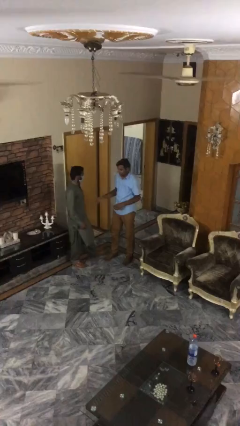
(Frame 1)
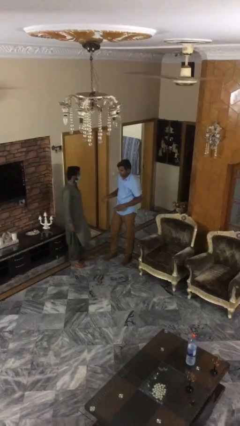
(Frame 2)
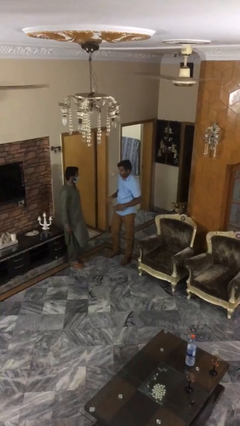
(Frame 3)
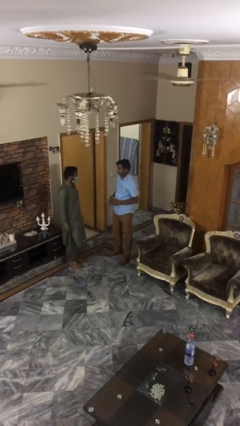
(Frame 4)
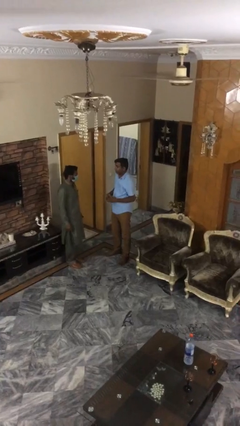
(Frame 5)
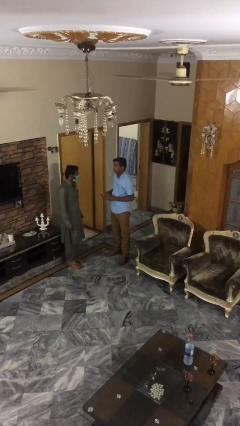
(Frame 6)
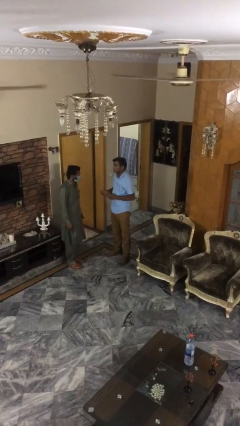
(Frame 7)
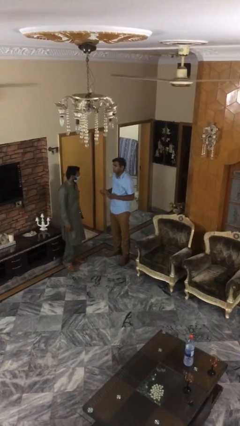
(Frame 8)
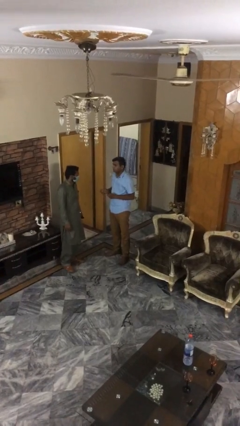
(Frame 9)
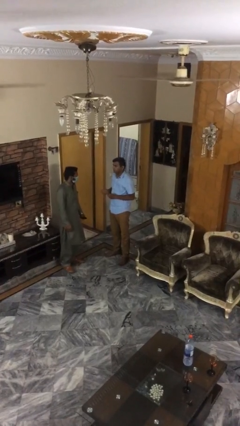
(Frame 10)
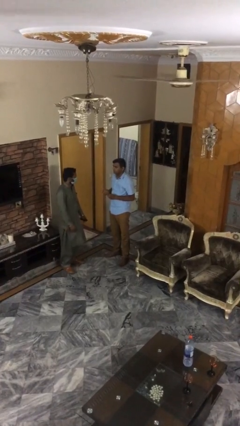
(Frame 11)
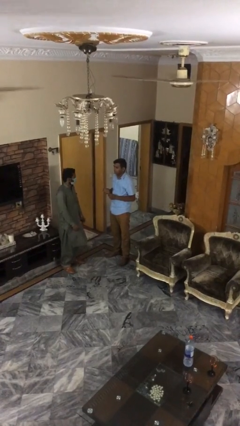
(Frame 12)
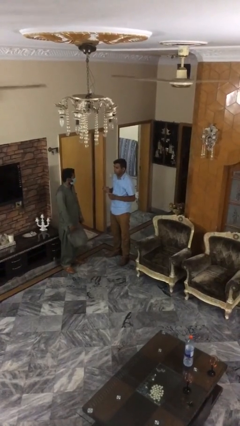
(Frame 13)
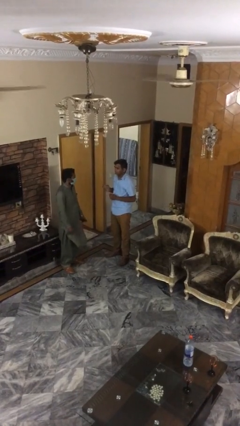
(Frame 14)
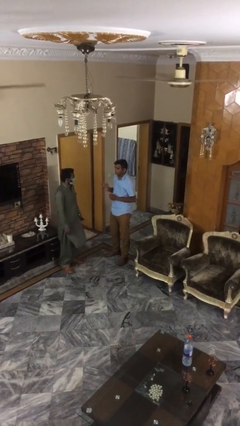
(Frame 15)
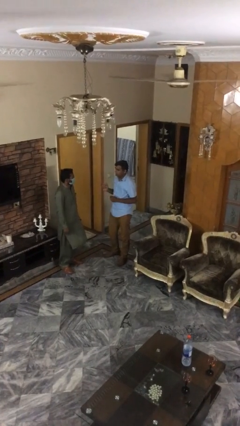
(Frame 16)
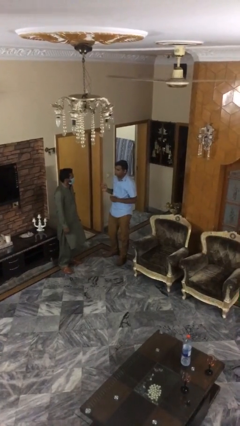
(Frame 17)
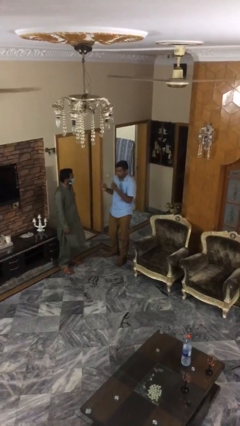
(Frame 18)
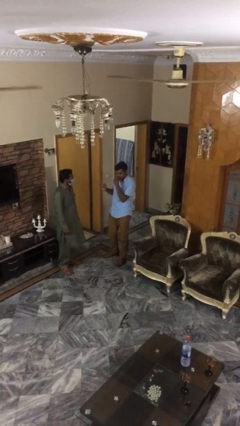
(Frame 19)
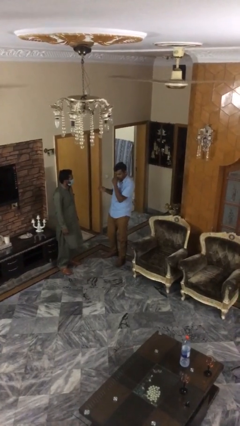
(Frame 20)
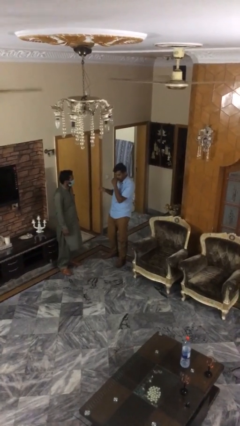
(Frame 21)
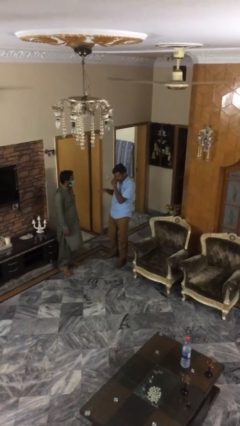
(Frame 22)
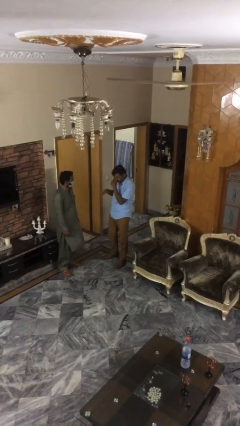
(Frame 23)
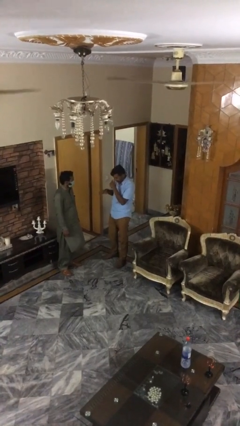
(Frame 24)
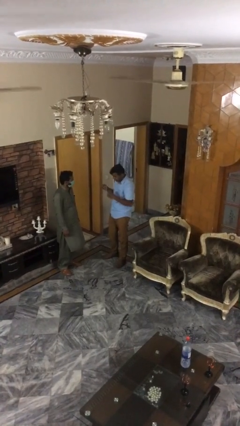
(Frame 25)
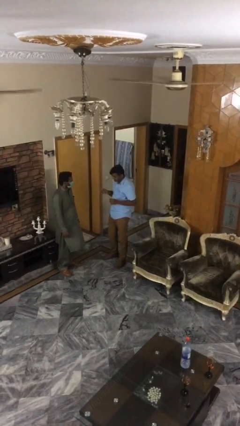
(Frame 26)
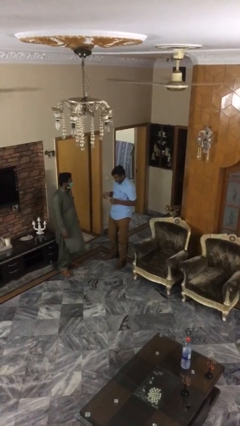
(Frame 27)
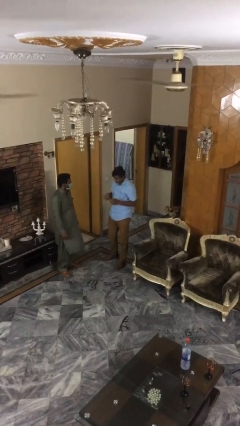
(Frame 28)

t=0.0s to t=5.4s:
person talks to person

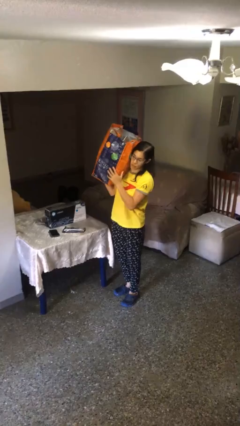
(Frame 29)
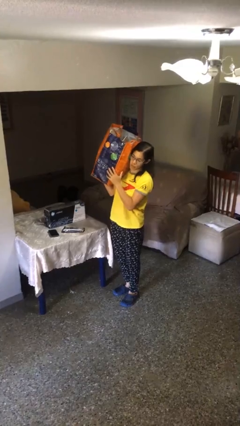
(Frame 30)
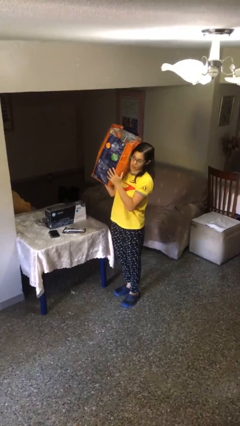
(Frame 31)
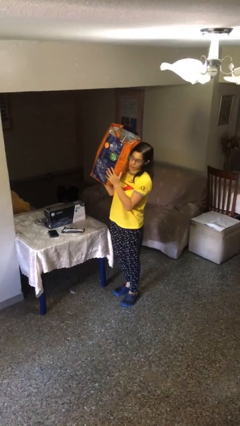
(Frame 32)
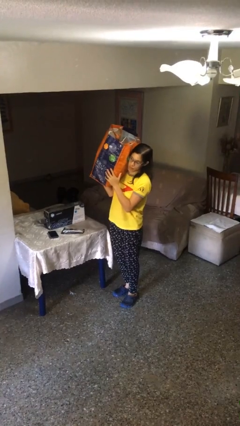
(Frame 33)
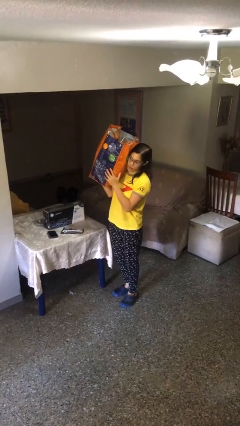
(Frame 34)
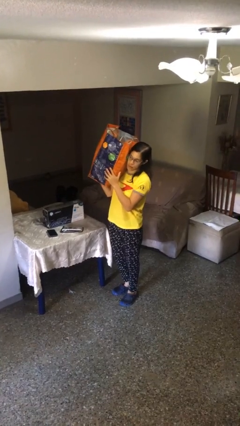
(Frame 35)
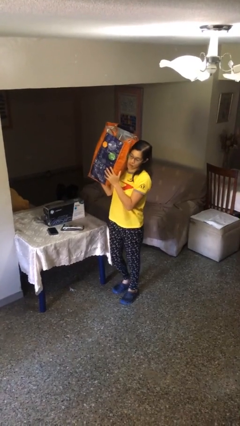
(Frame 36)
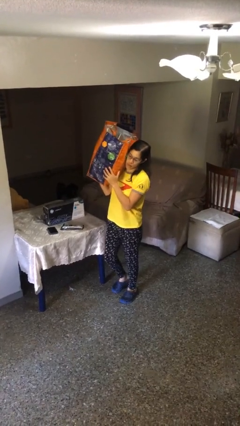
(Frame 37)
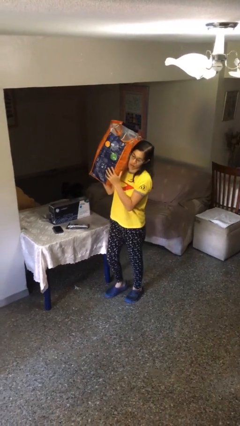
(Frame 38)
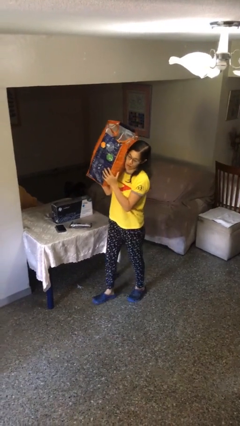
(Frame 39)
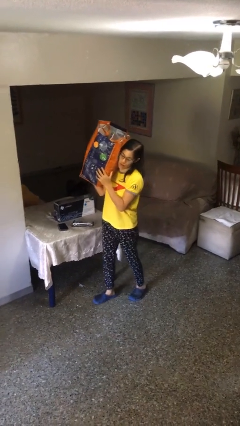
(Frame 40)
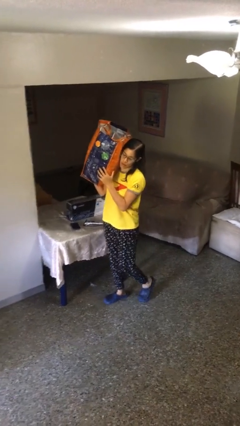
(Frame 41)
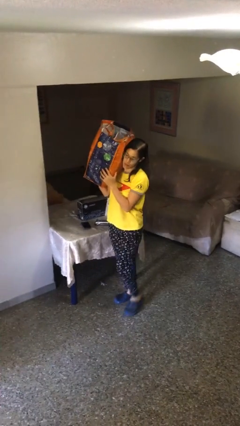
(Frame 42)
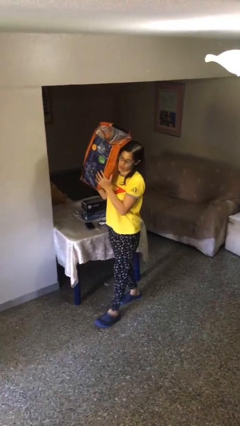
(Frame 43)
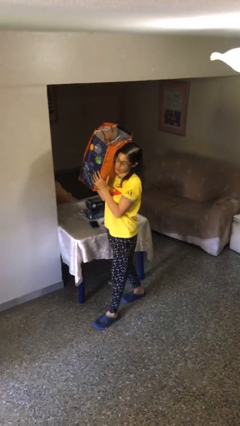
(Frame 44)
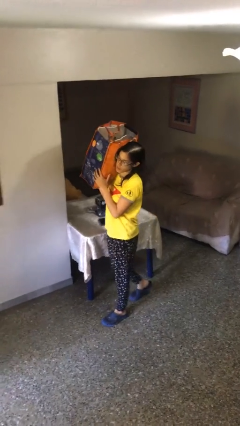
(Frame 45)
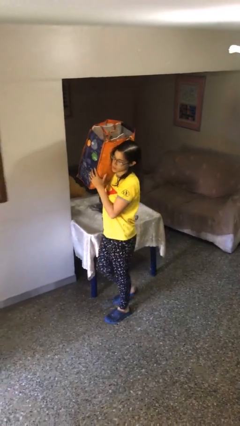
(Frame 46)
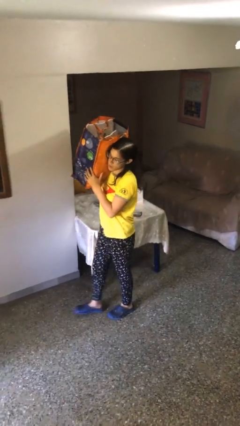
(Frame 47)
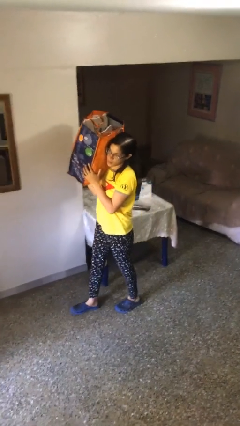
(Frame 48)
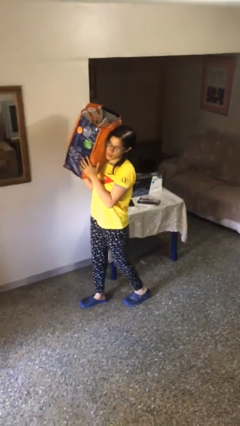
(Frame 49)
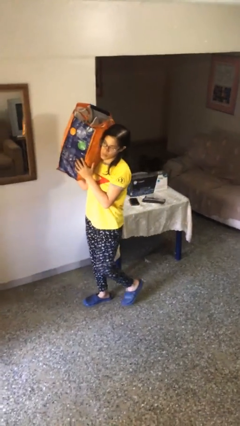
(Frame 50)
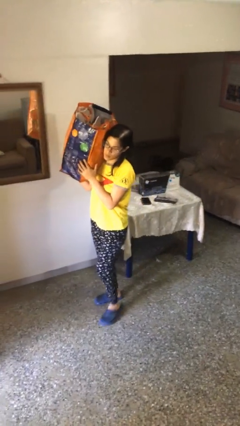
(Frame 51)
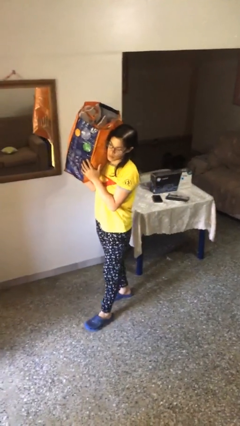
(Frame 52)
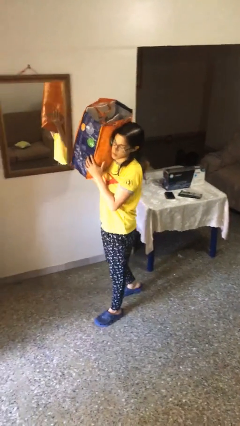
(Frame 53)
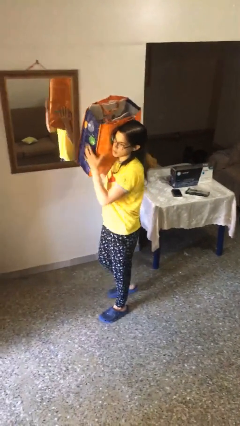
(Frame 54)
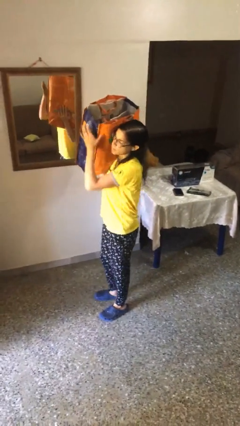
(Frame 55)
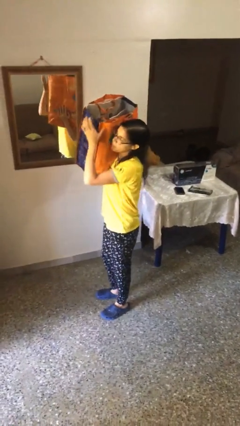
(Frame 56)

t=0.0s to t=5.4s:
person carries heavy object

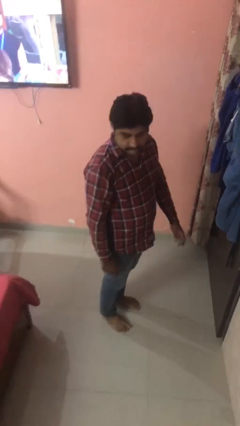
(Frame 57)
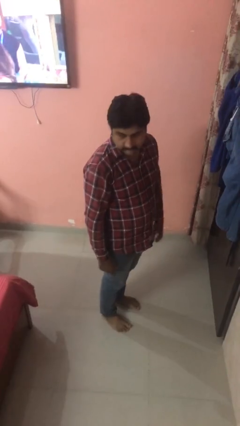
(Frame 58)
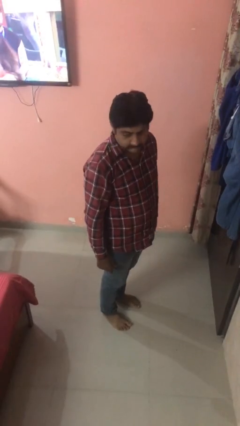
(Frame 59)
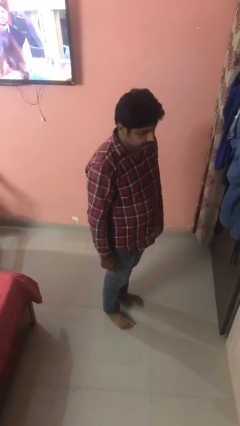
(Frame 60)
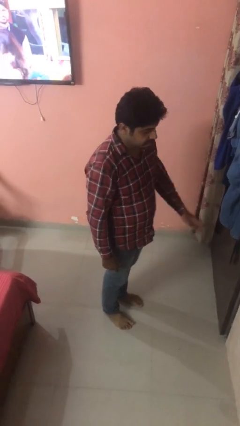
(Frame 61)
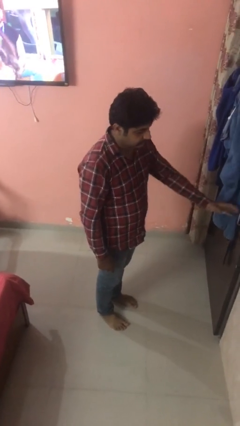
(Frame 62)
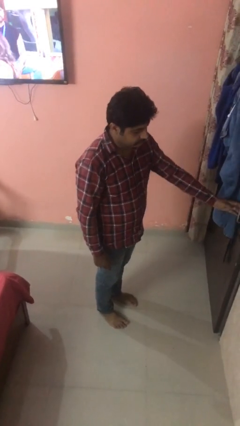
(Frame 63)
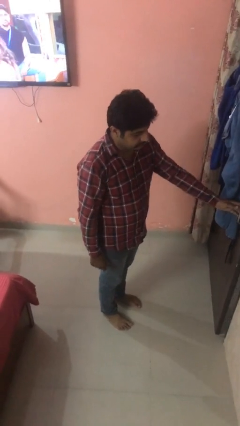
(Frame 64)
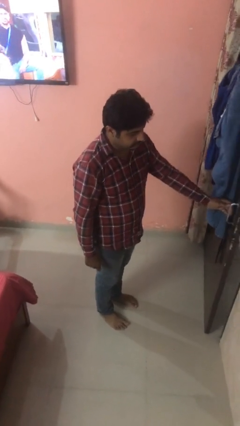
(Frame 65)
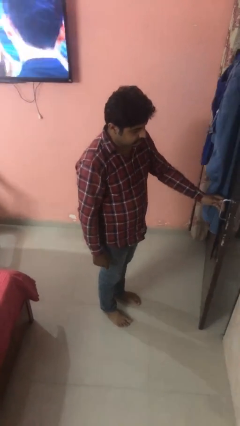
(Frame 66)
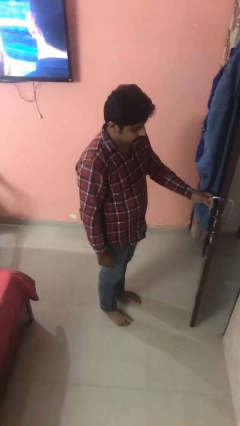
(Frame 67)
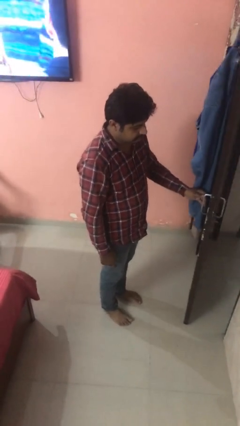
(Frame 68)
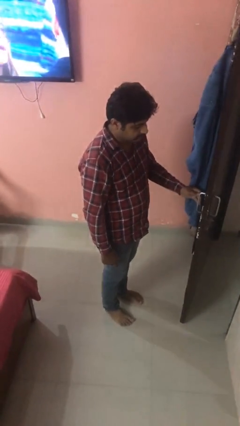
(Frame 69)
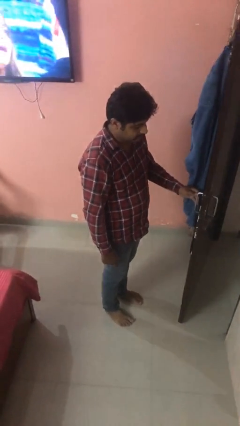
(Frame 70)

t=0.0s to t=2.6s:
person opens facility door

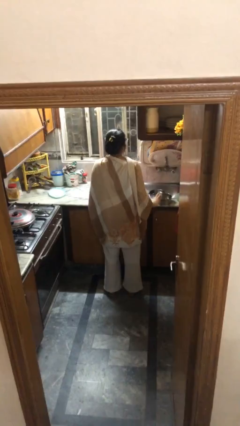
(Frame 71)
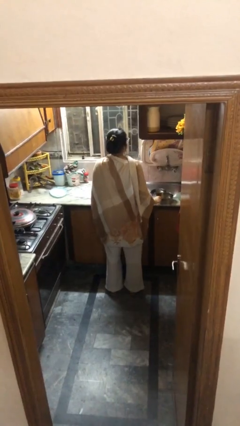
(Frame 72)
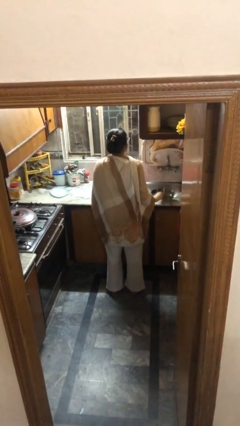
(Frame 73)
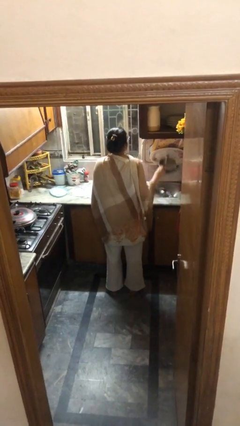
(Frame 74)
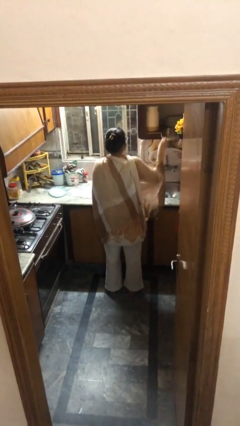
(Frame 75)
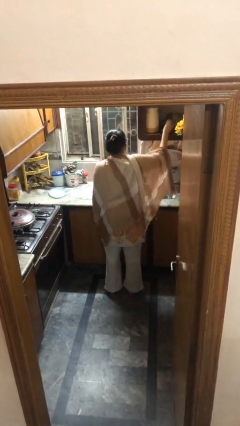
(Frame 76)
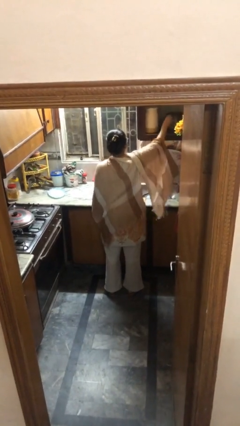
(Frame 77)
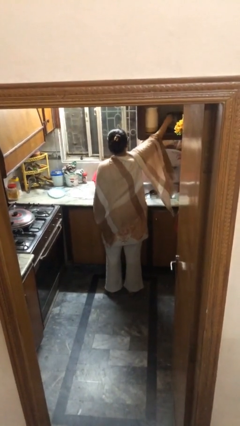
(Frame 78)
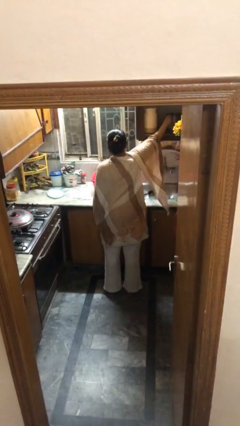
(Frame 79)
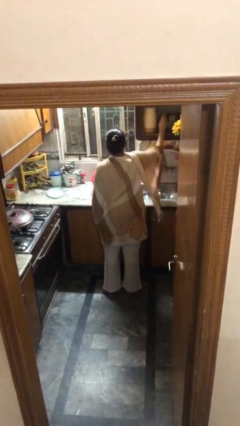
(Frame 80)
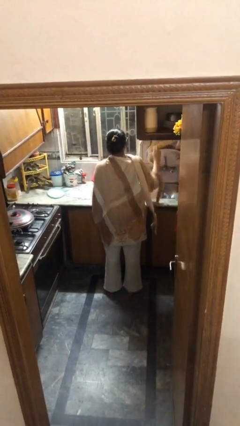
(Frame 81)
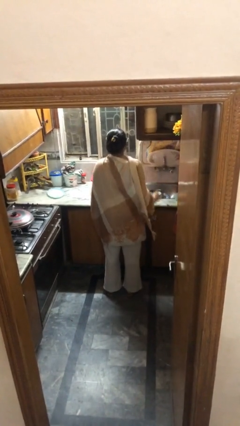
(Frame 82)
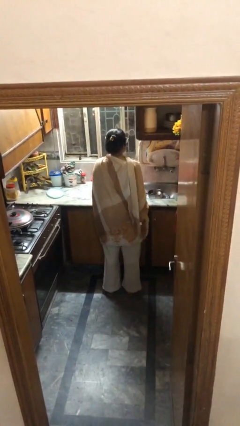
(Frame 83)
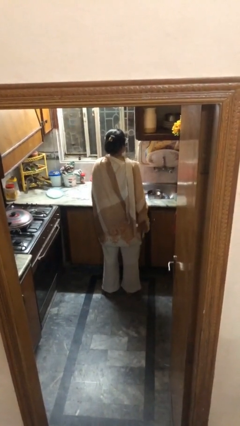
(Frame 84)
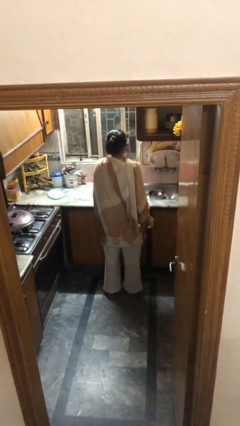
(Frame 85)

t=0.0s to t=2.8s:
person puts object in cabinet

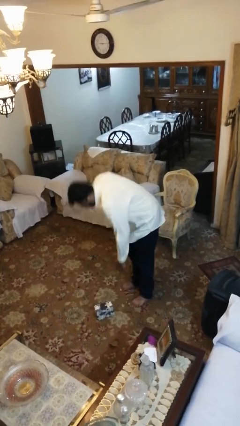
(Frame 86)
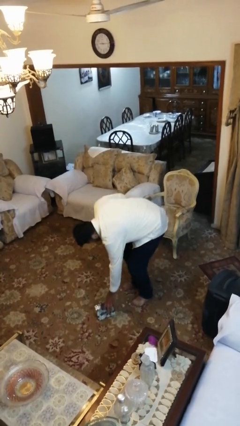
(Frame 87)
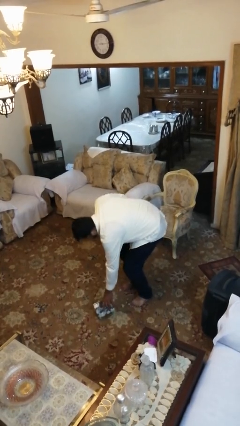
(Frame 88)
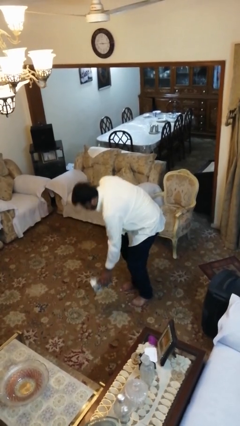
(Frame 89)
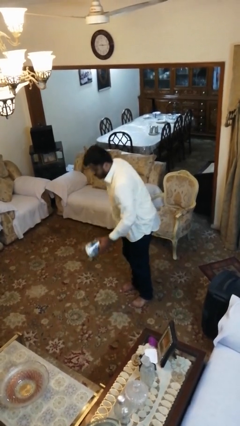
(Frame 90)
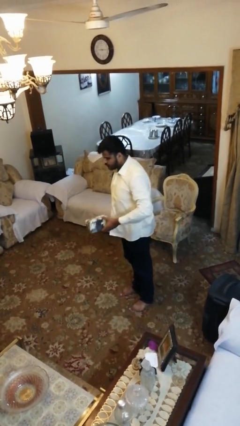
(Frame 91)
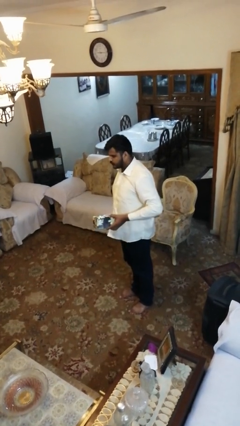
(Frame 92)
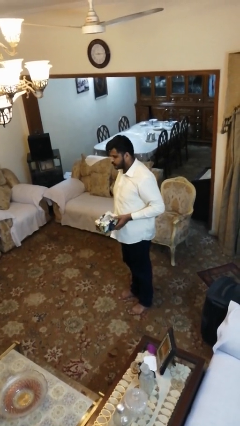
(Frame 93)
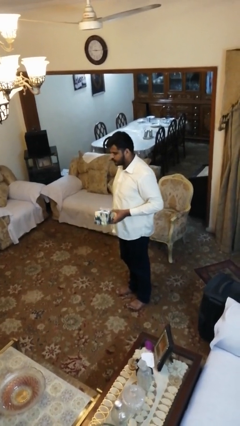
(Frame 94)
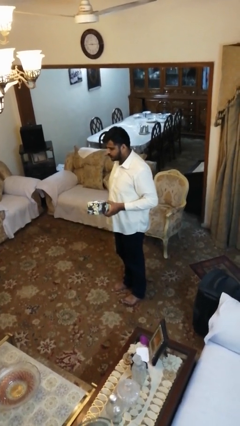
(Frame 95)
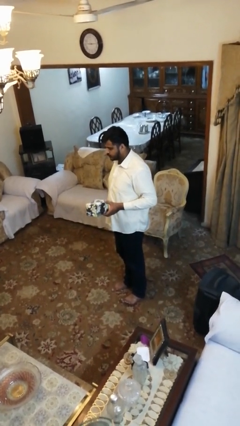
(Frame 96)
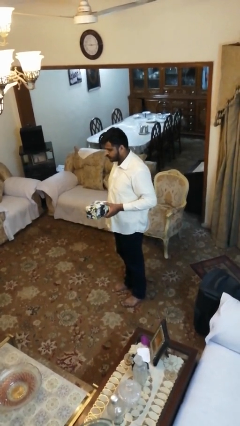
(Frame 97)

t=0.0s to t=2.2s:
person picks up object from floor
